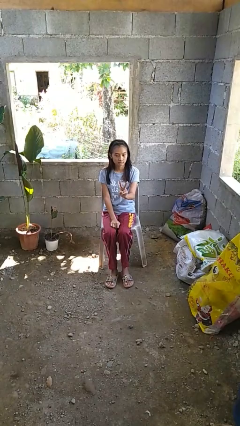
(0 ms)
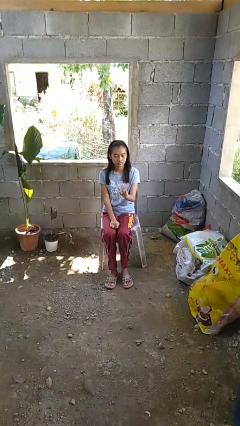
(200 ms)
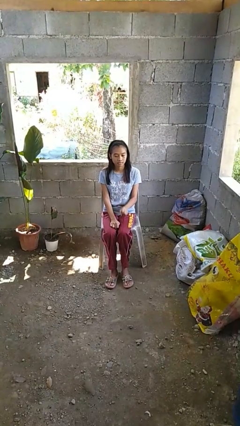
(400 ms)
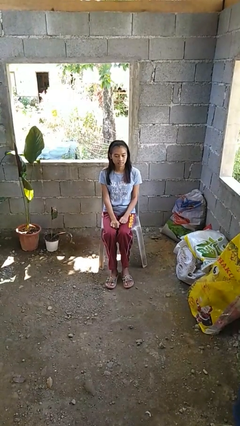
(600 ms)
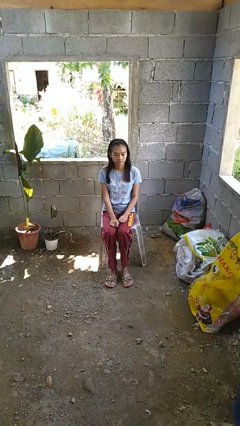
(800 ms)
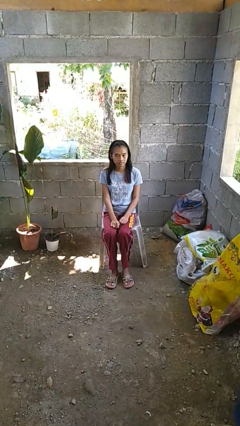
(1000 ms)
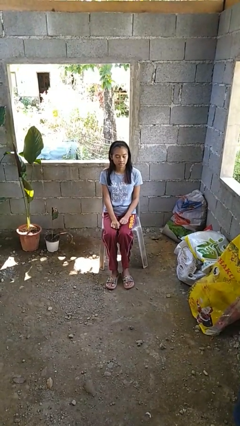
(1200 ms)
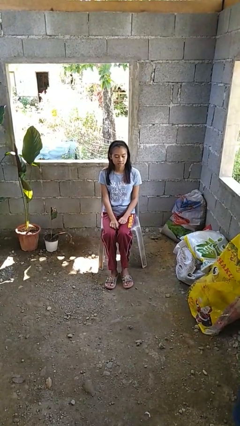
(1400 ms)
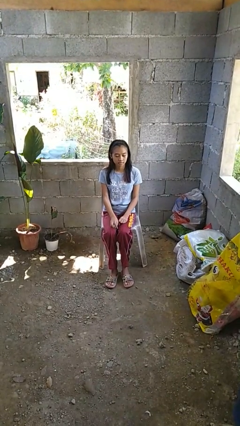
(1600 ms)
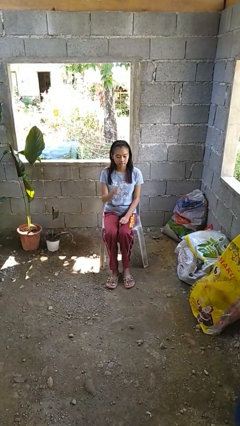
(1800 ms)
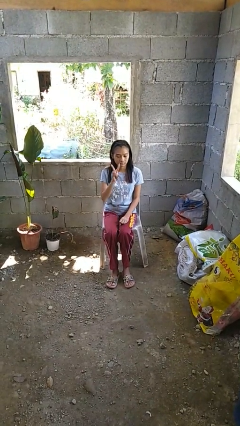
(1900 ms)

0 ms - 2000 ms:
person gestures peace

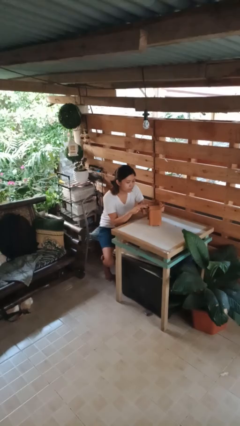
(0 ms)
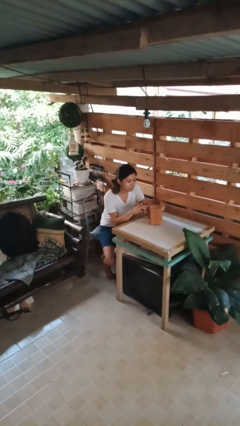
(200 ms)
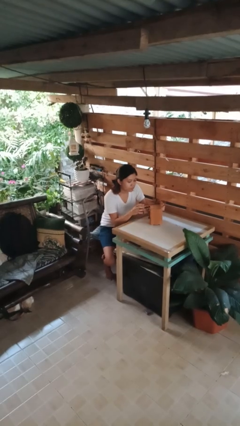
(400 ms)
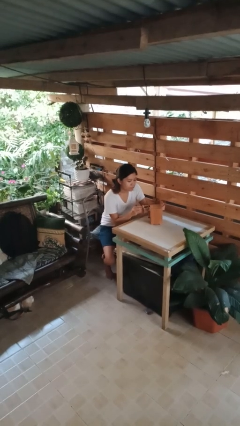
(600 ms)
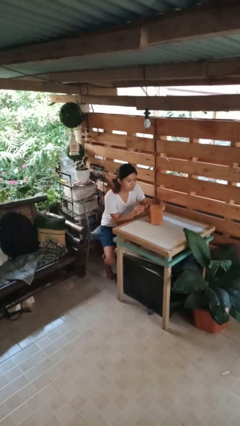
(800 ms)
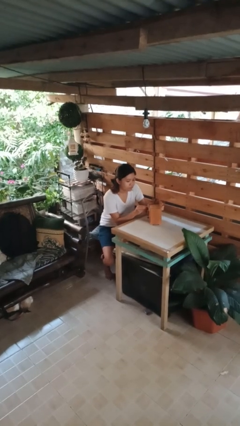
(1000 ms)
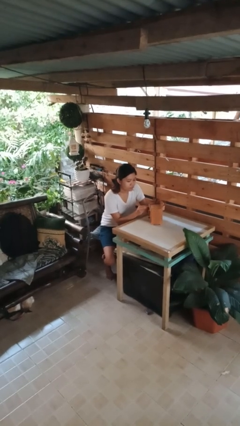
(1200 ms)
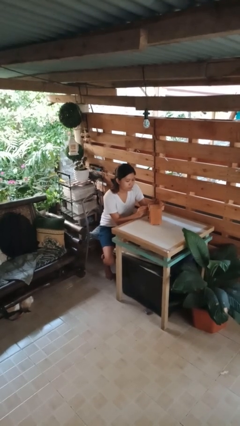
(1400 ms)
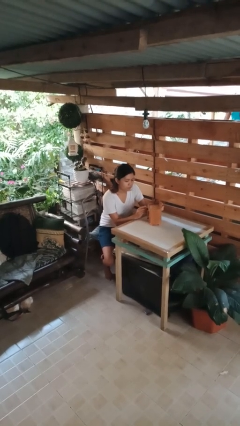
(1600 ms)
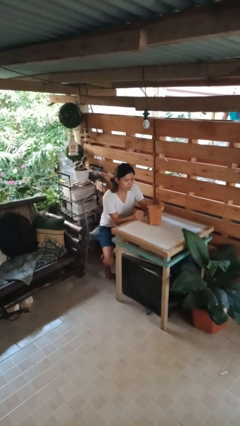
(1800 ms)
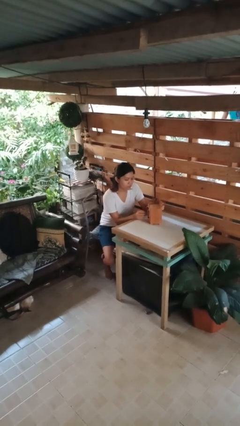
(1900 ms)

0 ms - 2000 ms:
person closes jewelry box

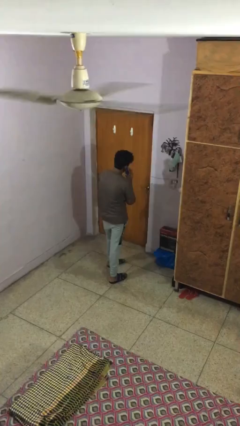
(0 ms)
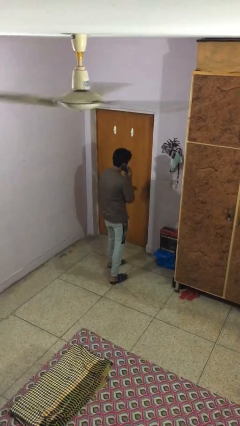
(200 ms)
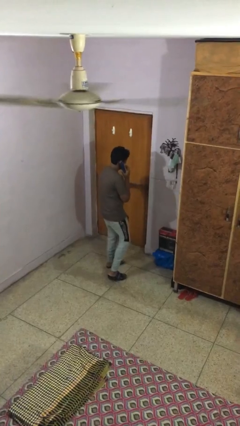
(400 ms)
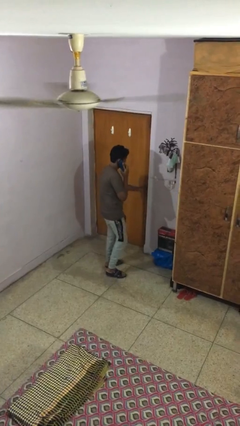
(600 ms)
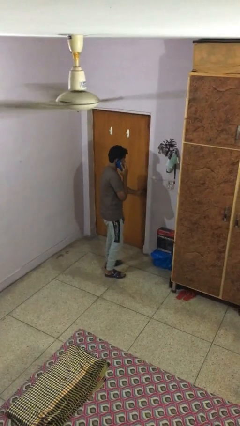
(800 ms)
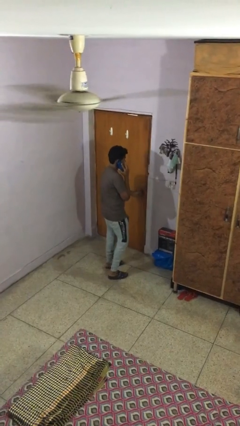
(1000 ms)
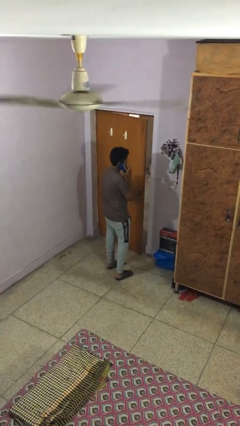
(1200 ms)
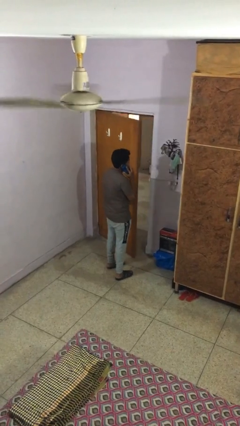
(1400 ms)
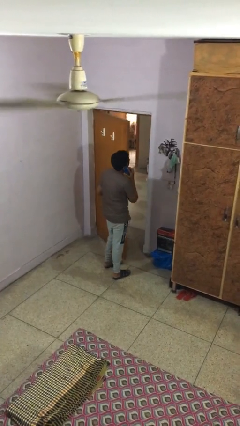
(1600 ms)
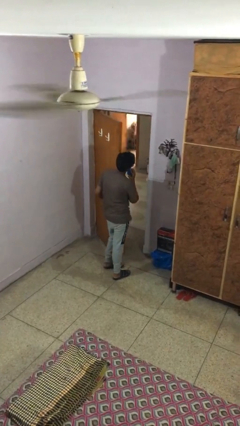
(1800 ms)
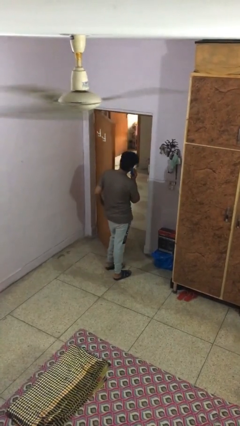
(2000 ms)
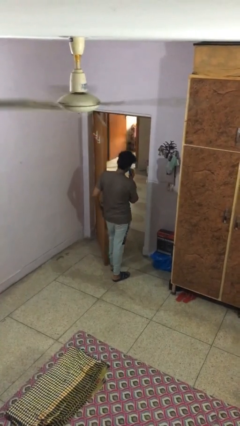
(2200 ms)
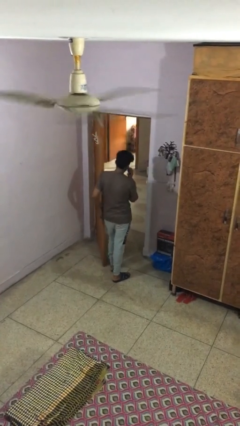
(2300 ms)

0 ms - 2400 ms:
person opens facility door

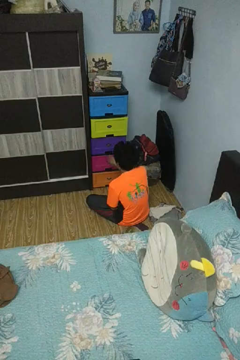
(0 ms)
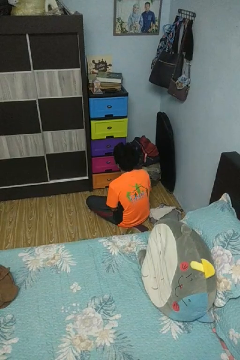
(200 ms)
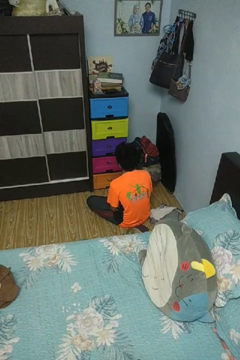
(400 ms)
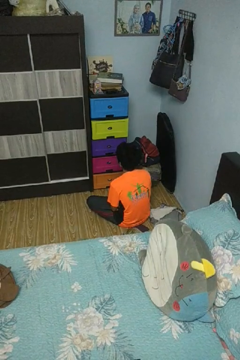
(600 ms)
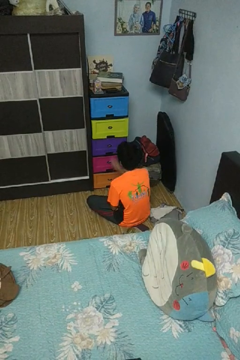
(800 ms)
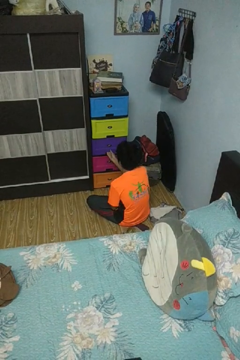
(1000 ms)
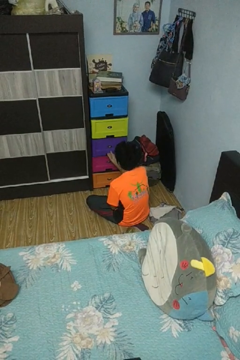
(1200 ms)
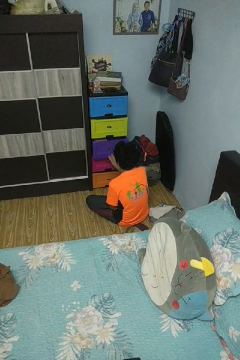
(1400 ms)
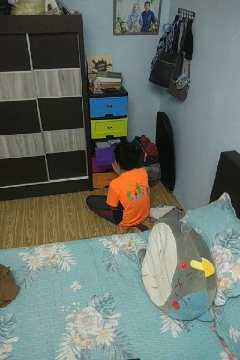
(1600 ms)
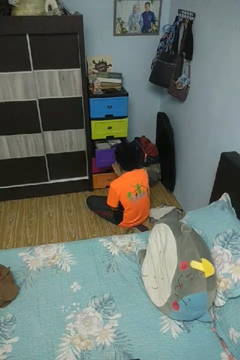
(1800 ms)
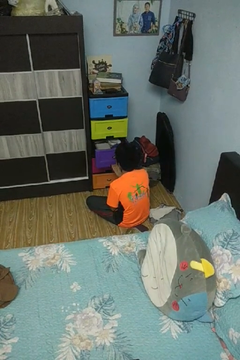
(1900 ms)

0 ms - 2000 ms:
person opens dresser drawer

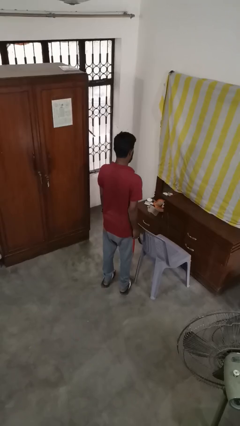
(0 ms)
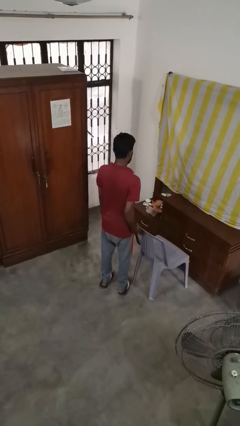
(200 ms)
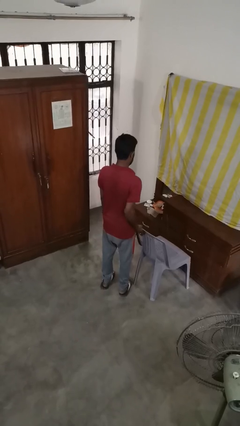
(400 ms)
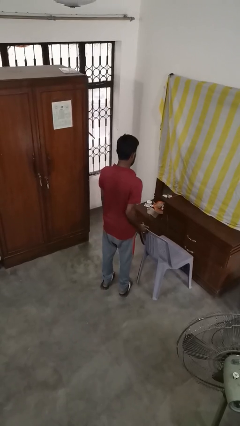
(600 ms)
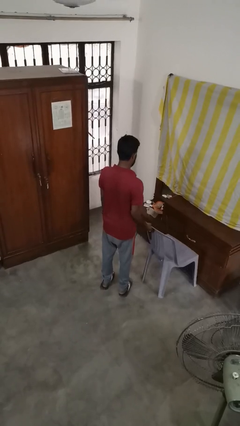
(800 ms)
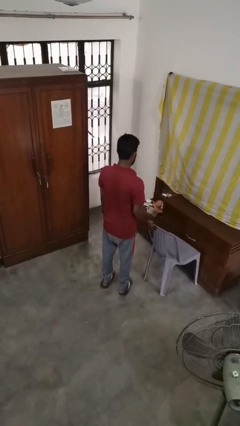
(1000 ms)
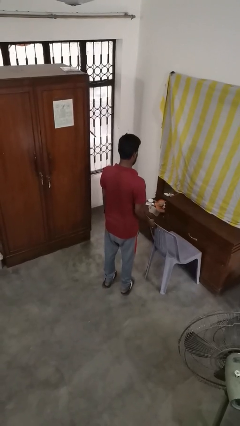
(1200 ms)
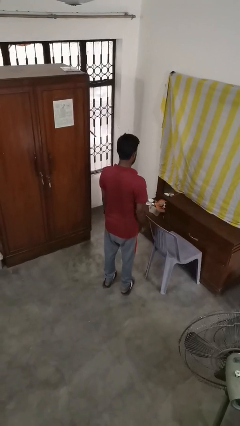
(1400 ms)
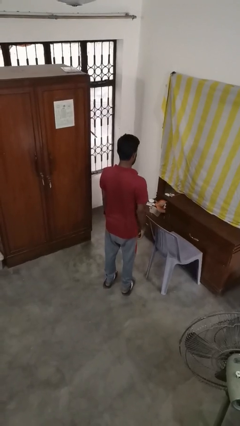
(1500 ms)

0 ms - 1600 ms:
person pushes in chair

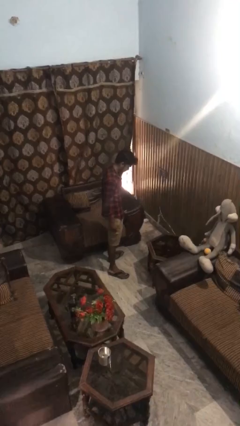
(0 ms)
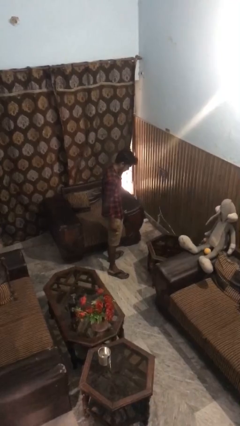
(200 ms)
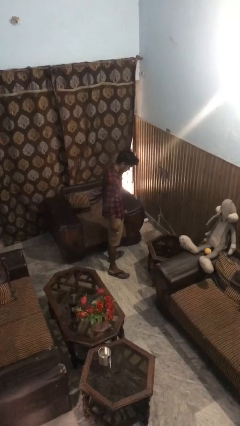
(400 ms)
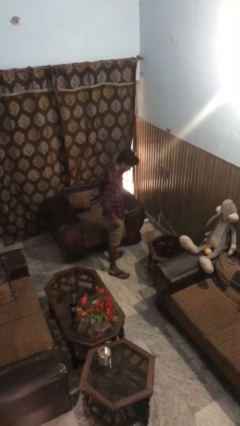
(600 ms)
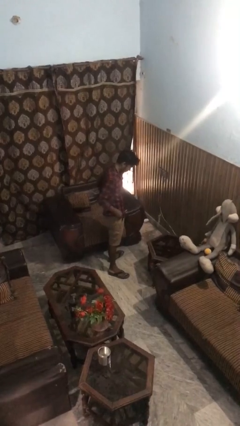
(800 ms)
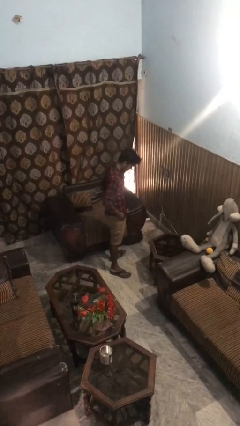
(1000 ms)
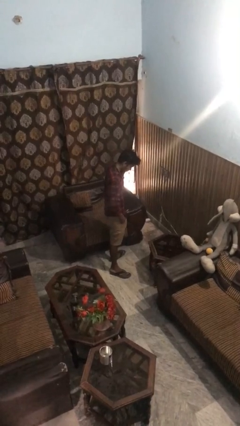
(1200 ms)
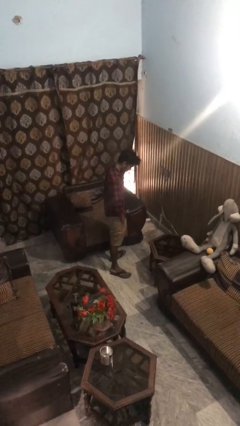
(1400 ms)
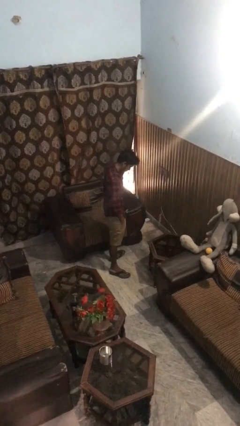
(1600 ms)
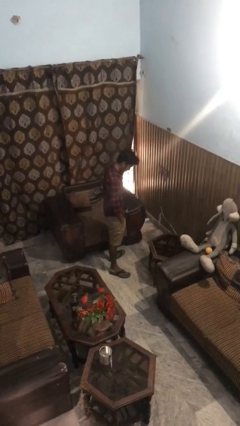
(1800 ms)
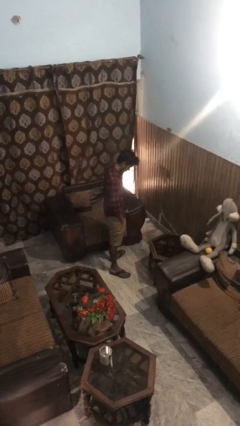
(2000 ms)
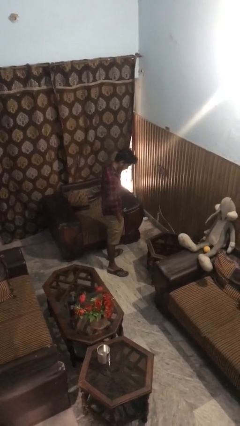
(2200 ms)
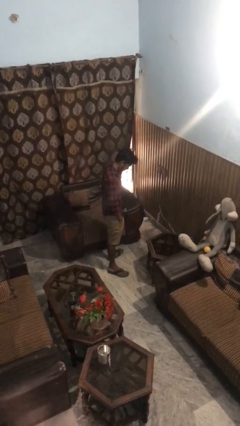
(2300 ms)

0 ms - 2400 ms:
person puts hands in back pockets

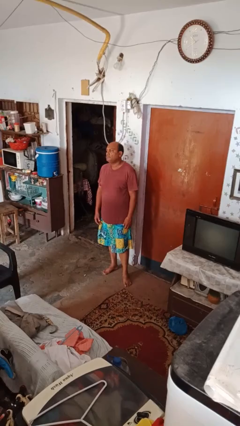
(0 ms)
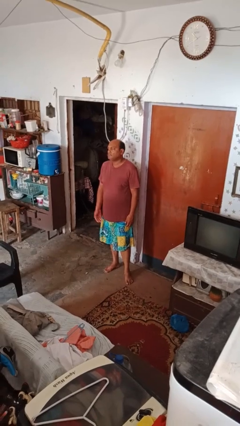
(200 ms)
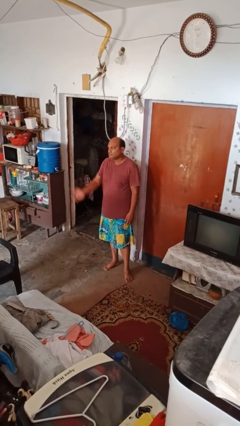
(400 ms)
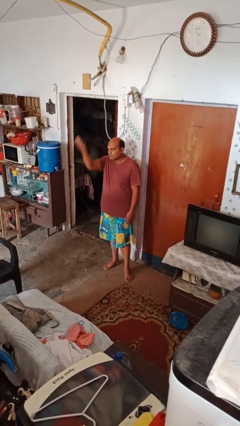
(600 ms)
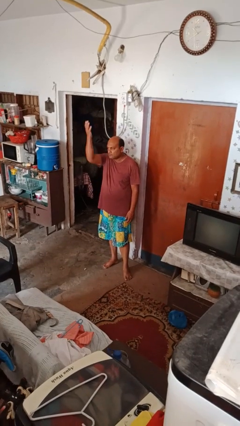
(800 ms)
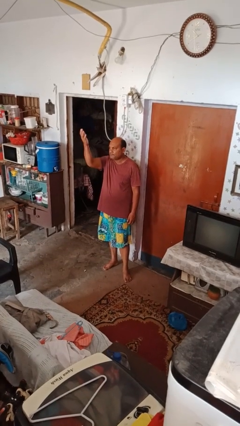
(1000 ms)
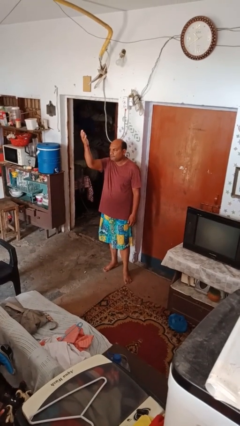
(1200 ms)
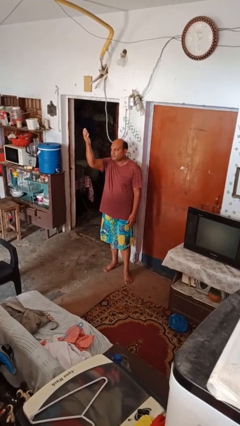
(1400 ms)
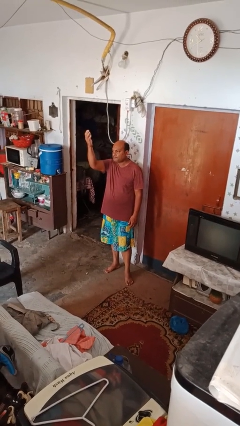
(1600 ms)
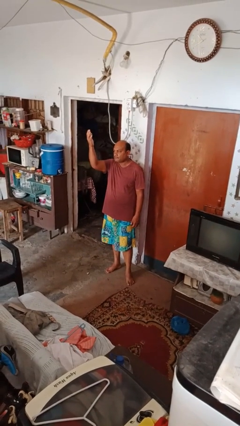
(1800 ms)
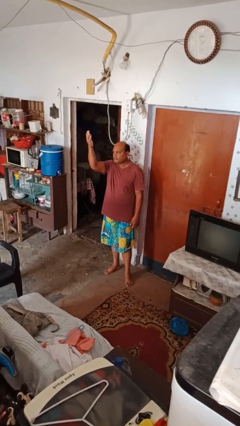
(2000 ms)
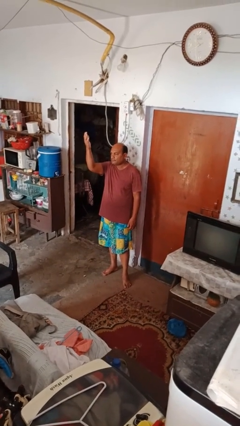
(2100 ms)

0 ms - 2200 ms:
person gestures raise hand

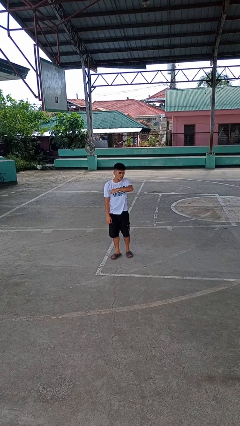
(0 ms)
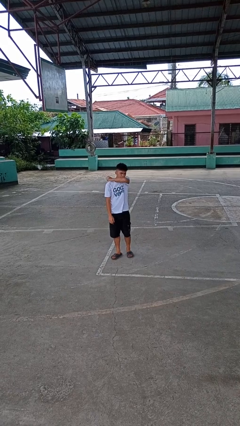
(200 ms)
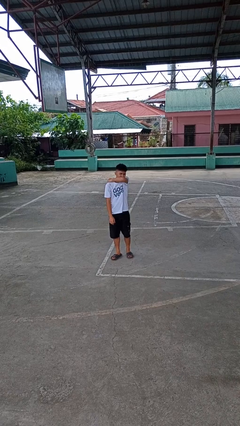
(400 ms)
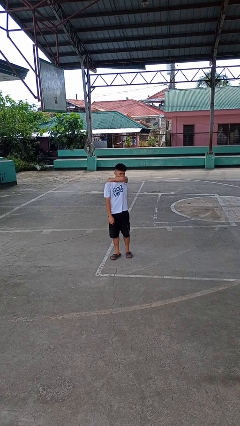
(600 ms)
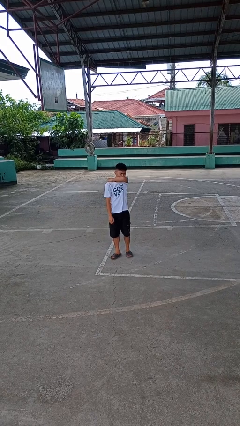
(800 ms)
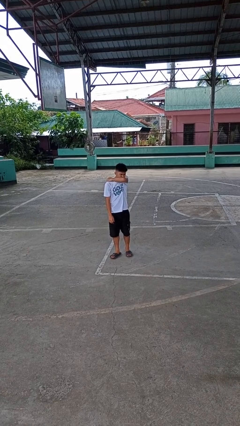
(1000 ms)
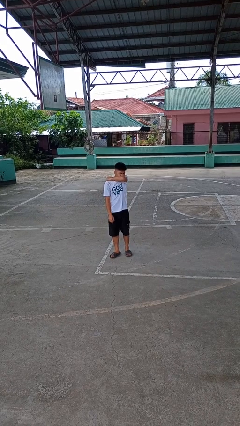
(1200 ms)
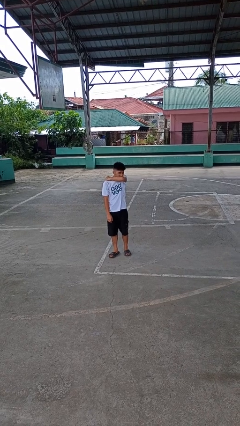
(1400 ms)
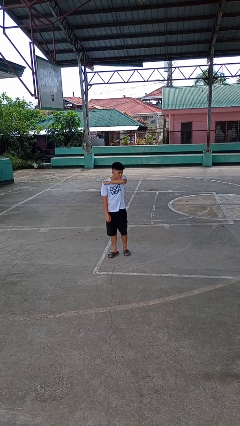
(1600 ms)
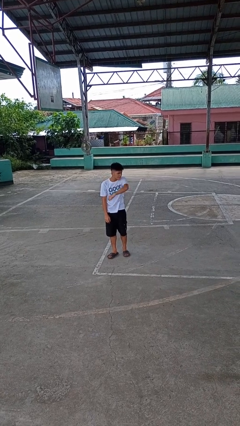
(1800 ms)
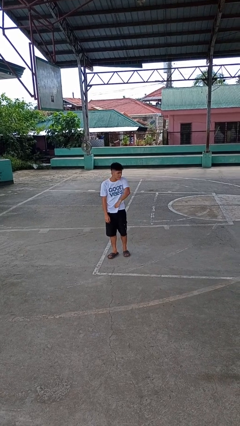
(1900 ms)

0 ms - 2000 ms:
person sneezes into arm

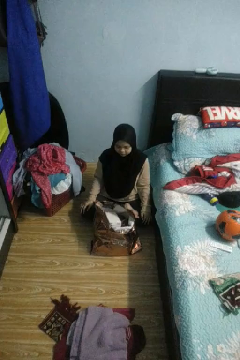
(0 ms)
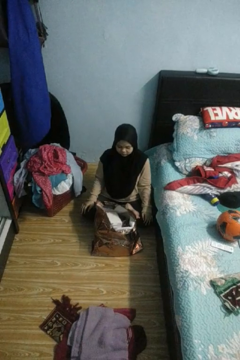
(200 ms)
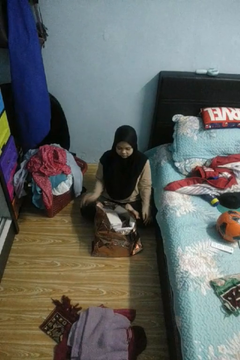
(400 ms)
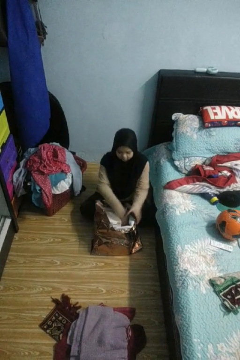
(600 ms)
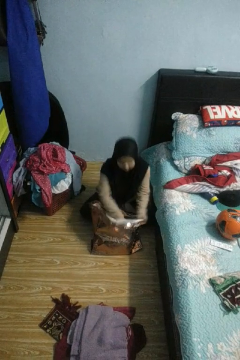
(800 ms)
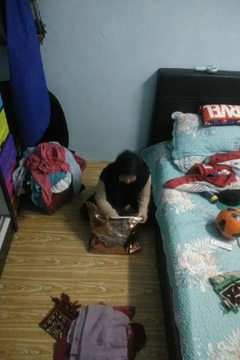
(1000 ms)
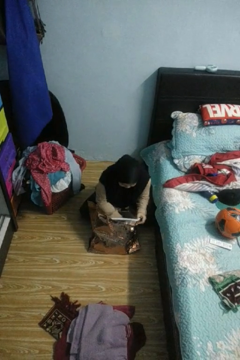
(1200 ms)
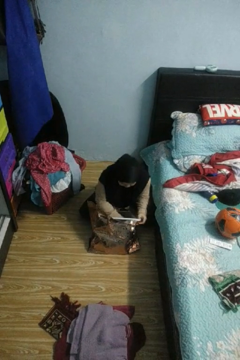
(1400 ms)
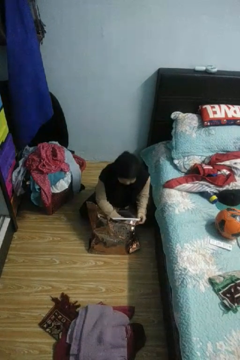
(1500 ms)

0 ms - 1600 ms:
person searches in bag
